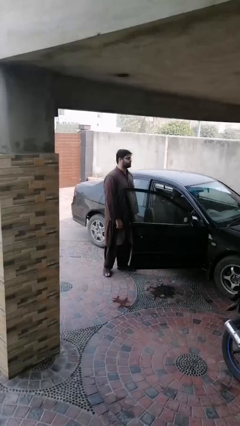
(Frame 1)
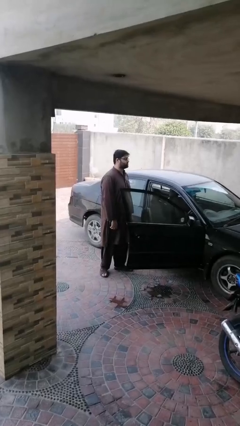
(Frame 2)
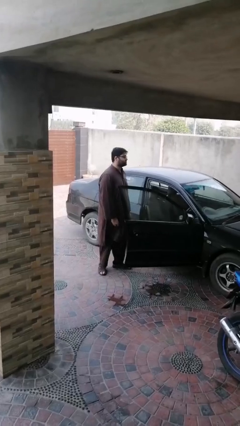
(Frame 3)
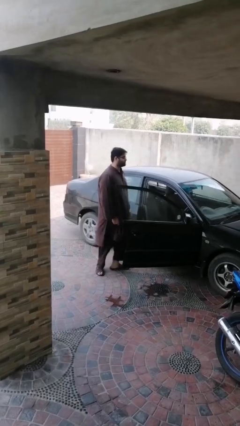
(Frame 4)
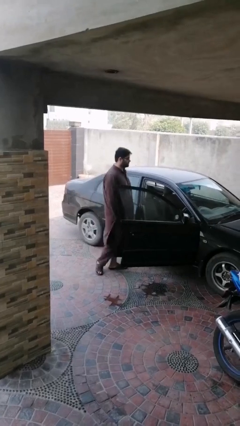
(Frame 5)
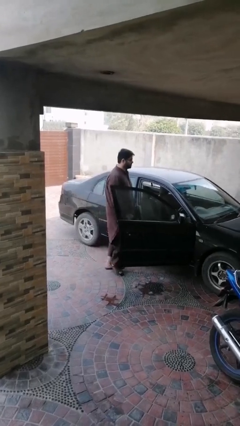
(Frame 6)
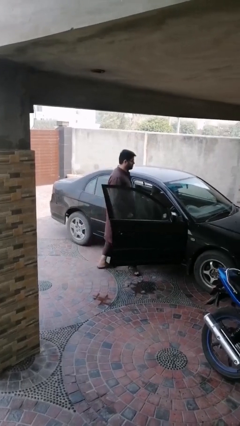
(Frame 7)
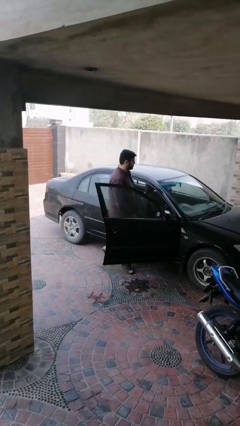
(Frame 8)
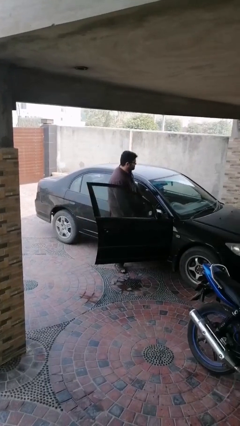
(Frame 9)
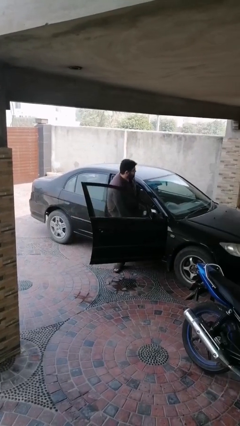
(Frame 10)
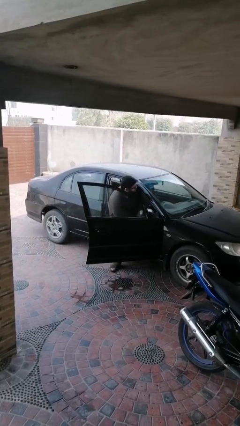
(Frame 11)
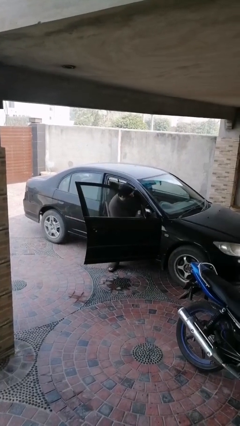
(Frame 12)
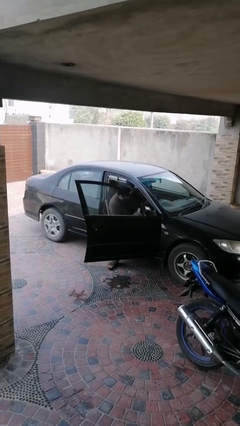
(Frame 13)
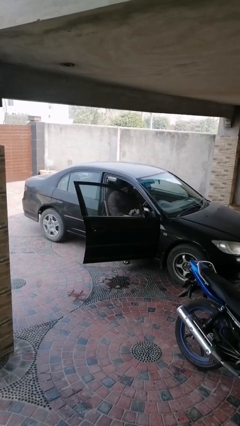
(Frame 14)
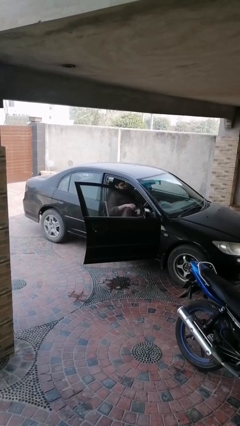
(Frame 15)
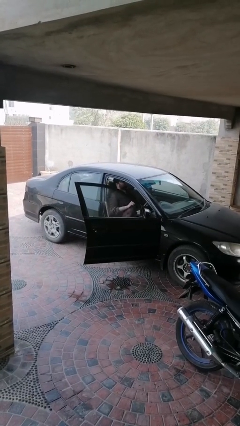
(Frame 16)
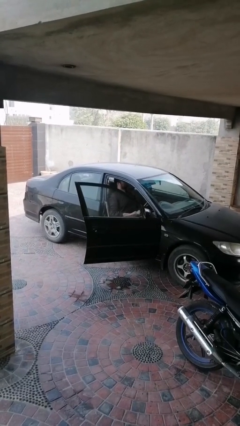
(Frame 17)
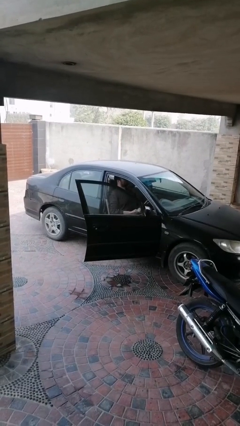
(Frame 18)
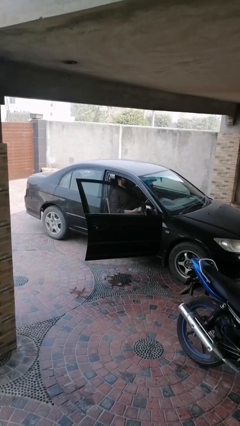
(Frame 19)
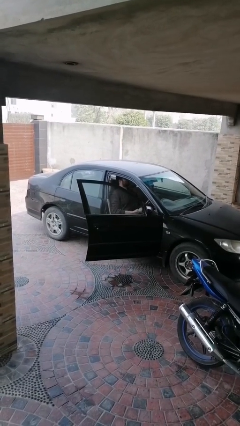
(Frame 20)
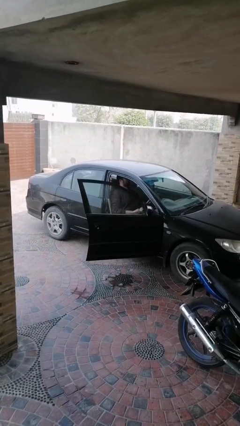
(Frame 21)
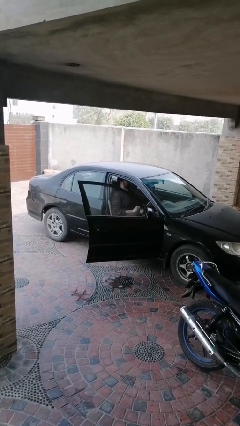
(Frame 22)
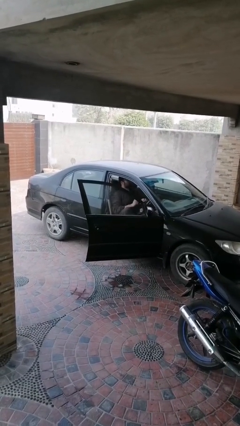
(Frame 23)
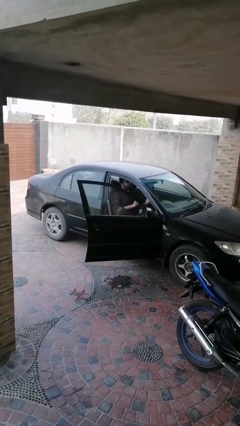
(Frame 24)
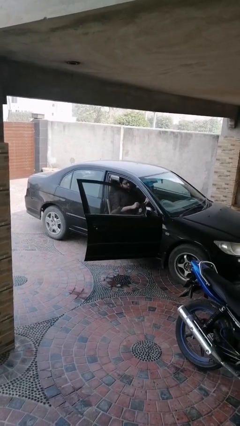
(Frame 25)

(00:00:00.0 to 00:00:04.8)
person enters car

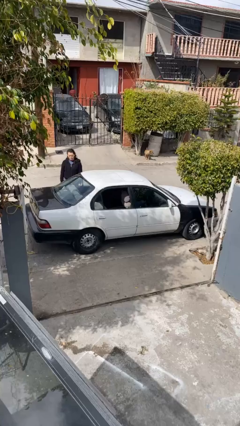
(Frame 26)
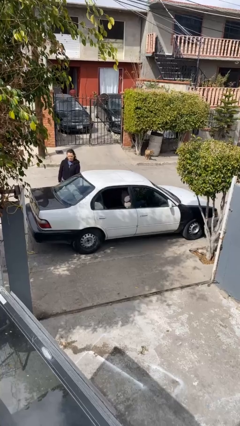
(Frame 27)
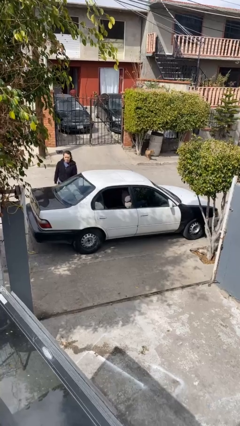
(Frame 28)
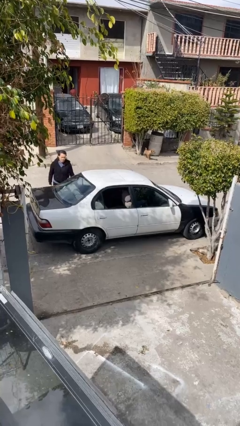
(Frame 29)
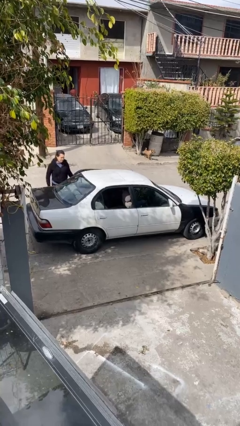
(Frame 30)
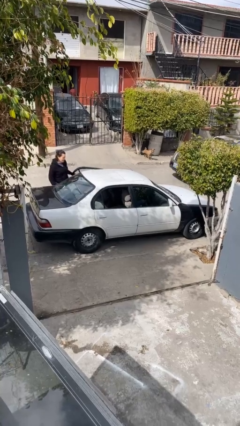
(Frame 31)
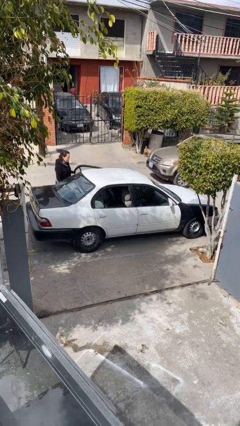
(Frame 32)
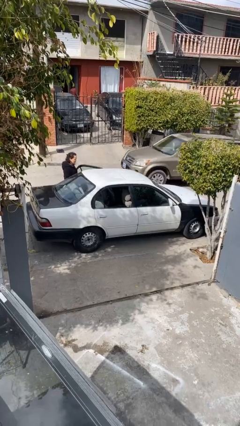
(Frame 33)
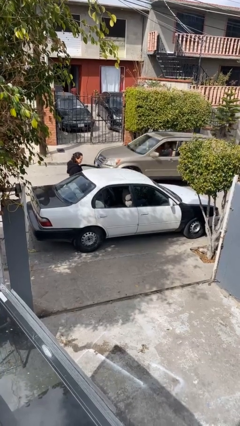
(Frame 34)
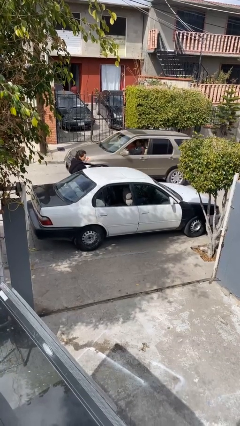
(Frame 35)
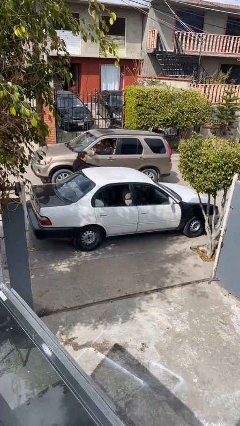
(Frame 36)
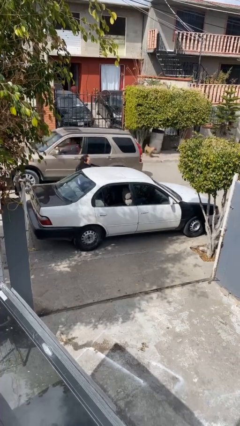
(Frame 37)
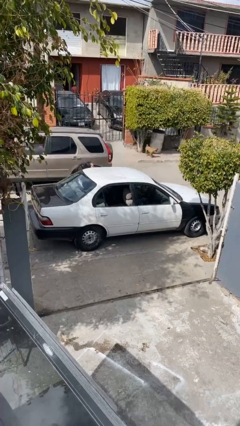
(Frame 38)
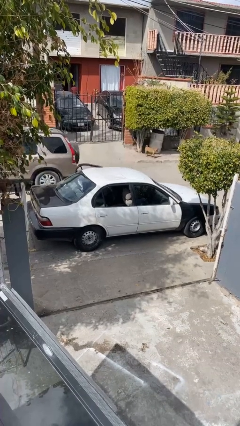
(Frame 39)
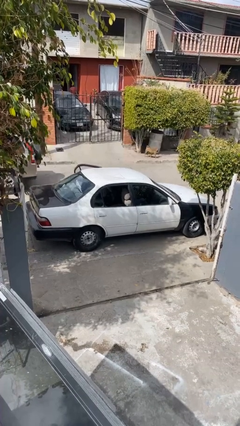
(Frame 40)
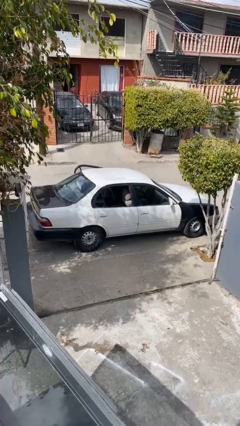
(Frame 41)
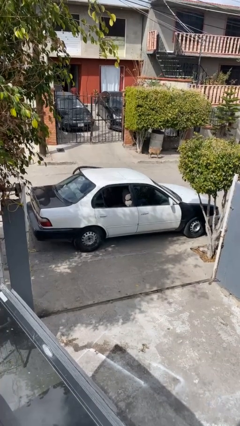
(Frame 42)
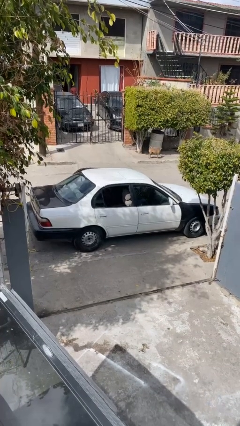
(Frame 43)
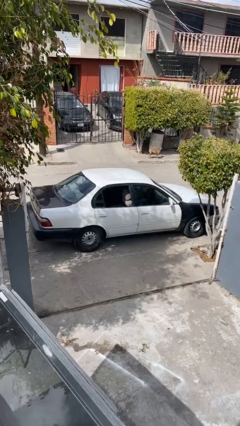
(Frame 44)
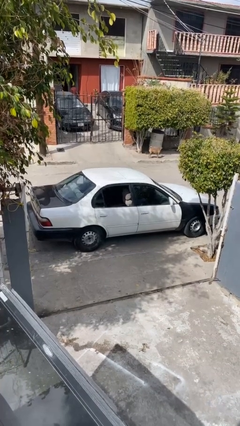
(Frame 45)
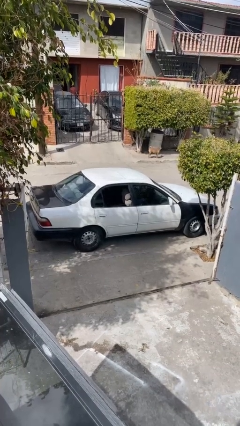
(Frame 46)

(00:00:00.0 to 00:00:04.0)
car picks up person

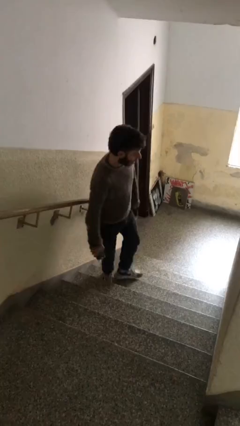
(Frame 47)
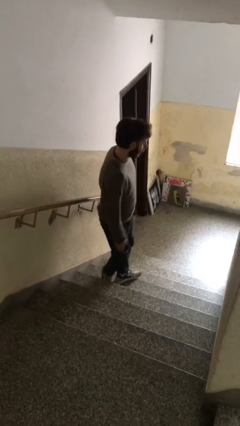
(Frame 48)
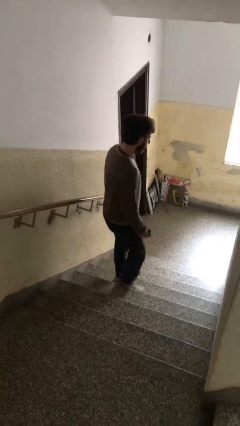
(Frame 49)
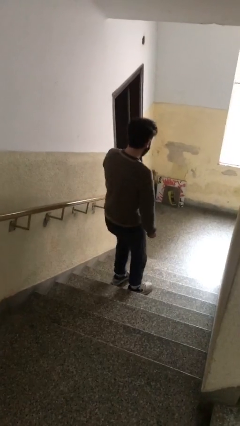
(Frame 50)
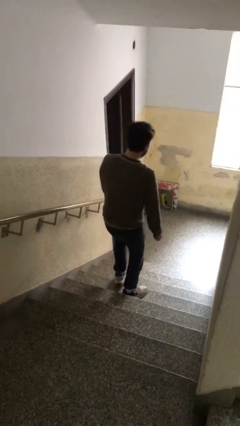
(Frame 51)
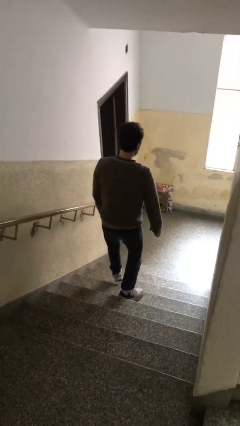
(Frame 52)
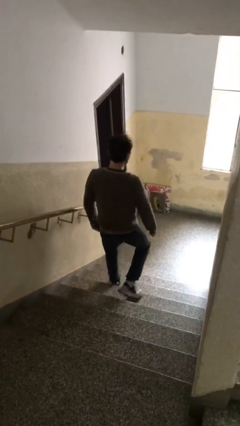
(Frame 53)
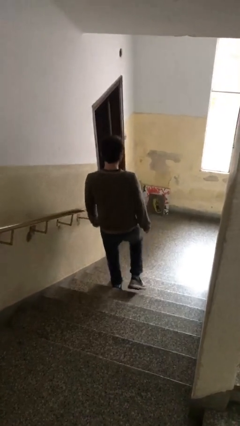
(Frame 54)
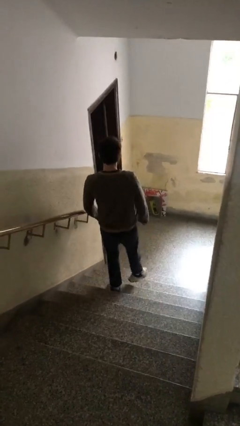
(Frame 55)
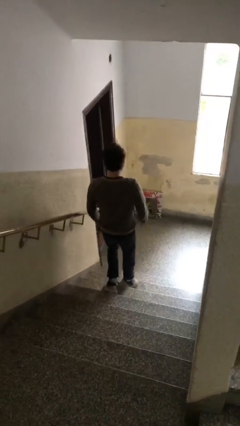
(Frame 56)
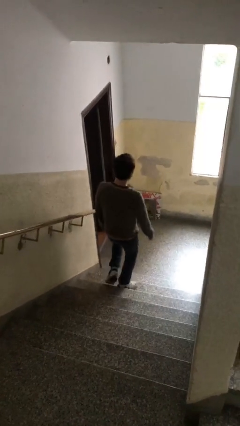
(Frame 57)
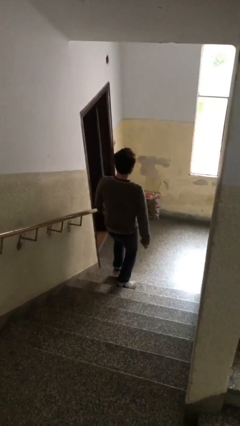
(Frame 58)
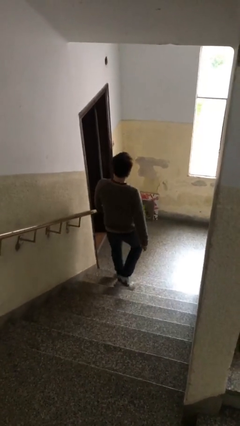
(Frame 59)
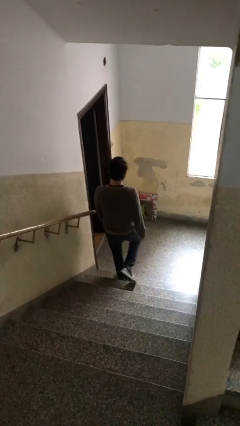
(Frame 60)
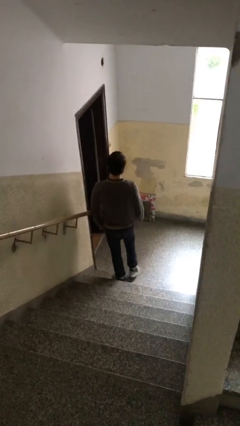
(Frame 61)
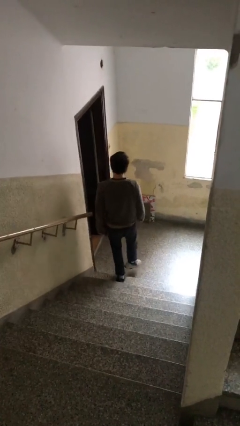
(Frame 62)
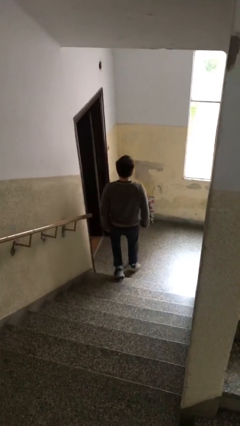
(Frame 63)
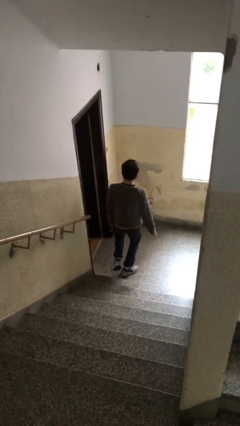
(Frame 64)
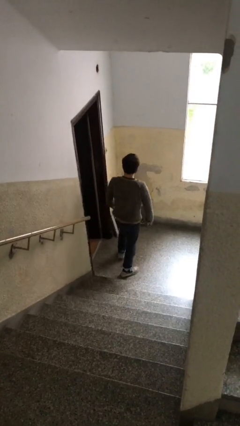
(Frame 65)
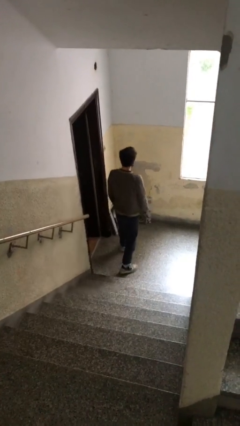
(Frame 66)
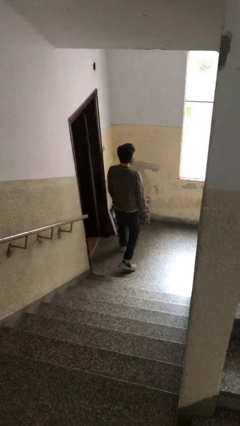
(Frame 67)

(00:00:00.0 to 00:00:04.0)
person climbs down stairs

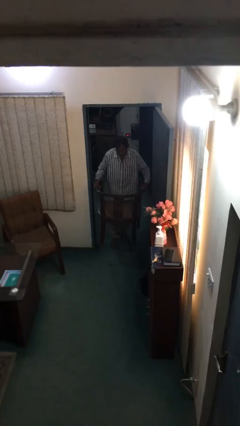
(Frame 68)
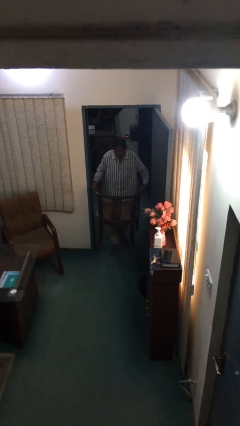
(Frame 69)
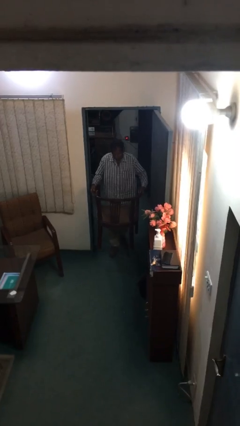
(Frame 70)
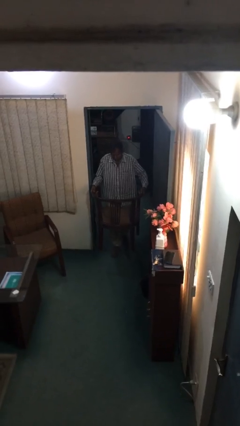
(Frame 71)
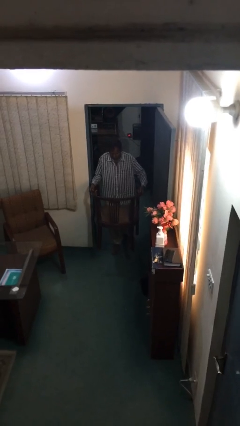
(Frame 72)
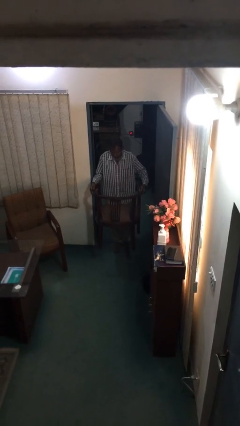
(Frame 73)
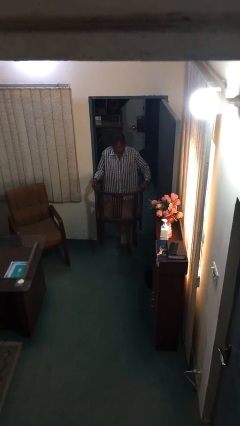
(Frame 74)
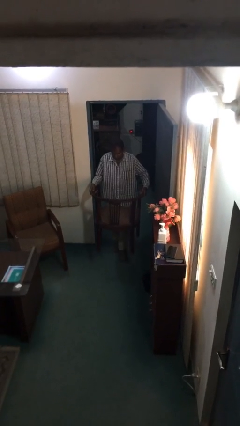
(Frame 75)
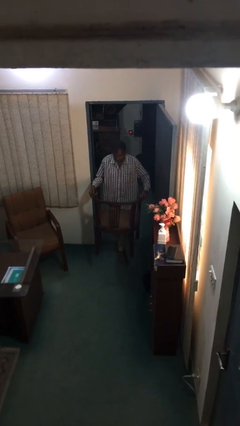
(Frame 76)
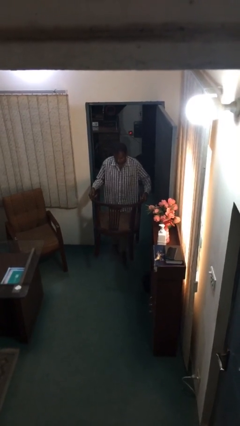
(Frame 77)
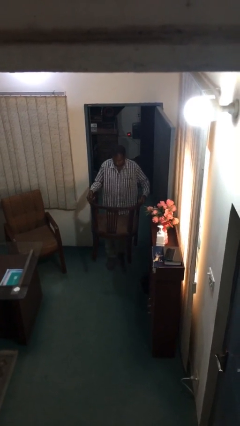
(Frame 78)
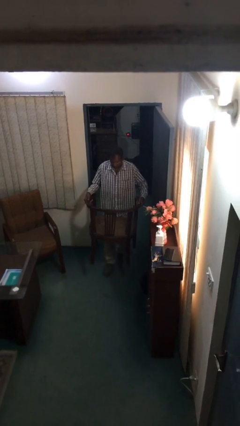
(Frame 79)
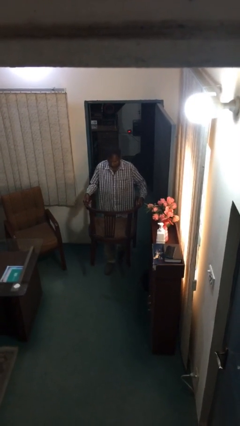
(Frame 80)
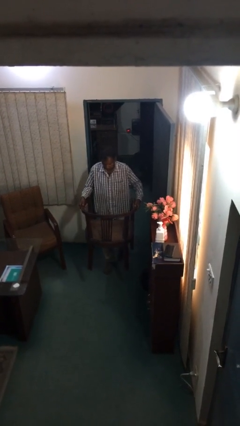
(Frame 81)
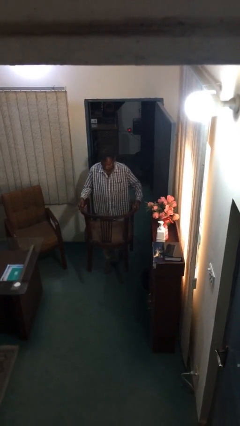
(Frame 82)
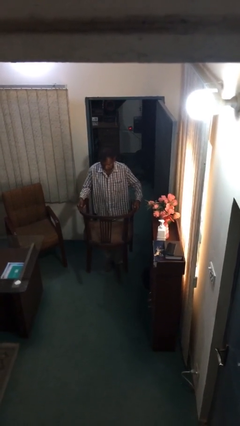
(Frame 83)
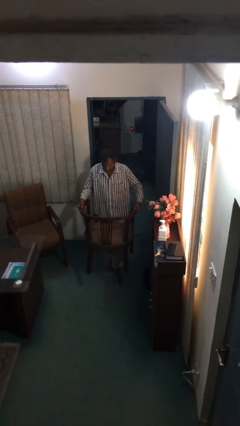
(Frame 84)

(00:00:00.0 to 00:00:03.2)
person carries heavy object

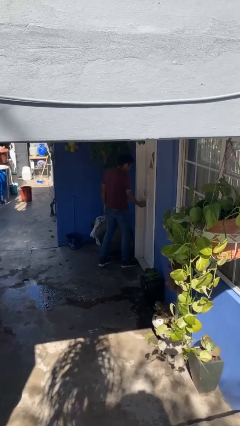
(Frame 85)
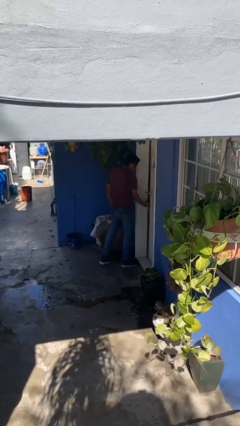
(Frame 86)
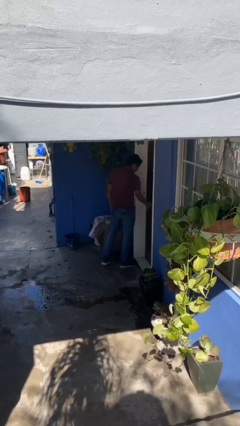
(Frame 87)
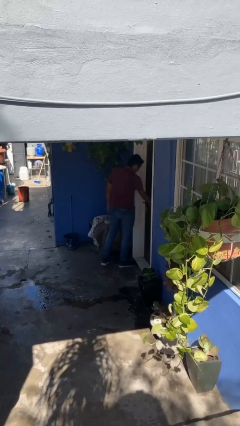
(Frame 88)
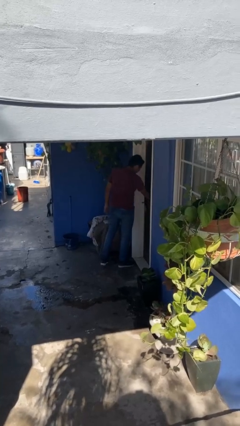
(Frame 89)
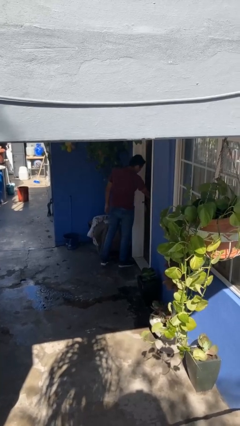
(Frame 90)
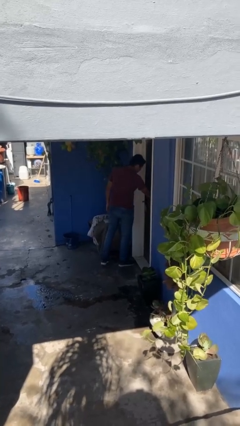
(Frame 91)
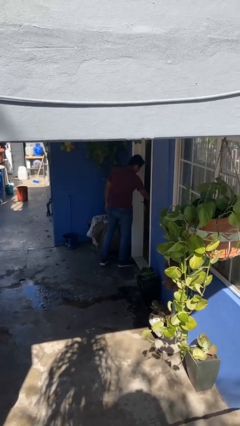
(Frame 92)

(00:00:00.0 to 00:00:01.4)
person opens facility door
